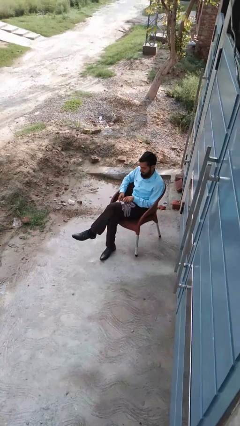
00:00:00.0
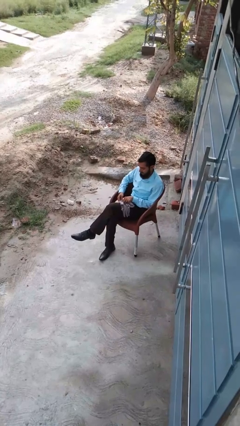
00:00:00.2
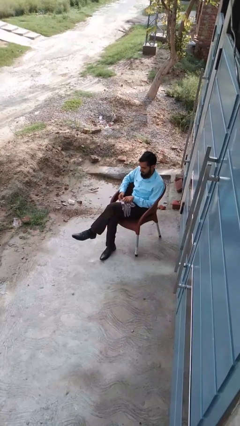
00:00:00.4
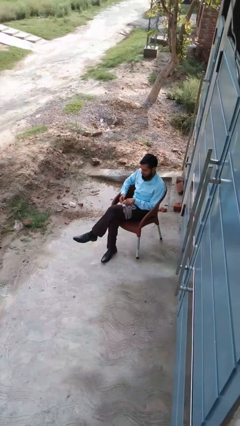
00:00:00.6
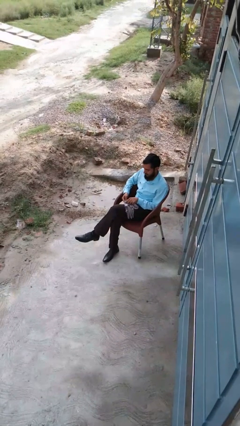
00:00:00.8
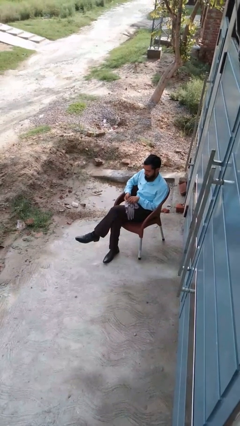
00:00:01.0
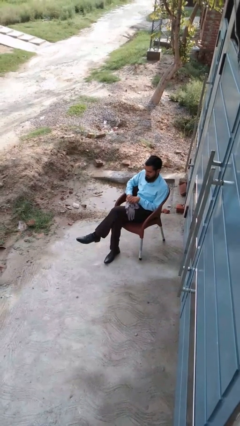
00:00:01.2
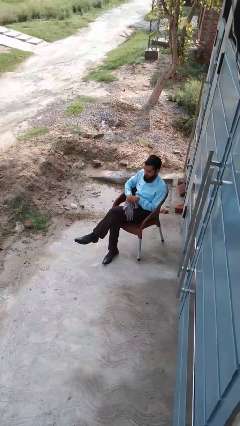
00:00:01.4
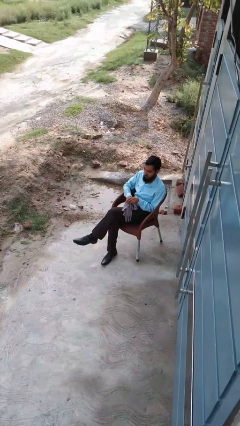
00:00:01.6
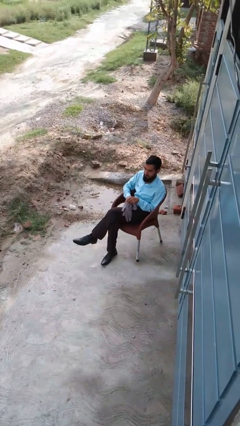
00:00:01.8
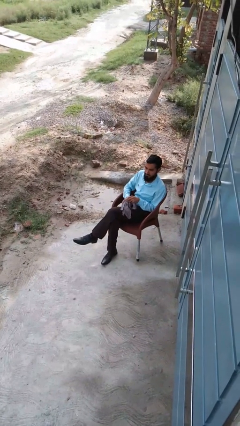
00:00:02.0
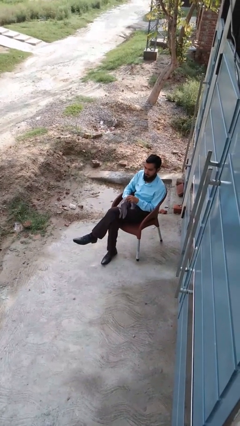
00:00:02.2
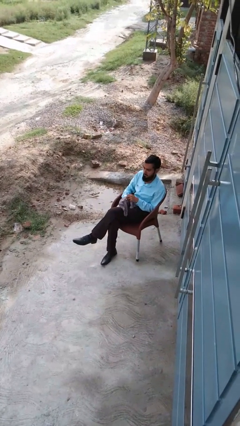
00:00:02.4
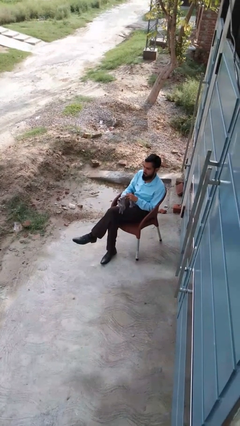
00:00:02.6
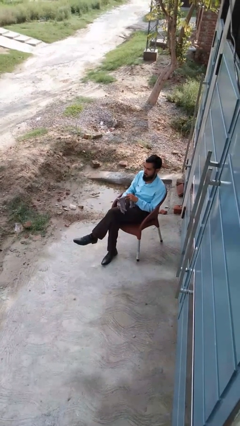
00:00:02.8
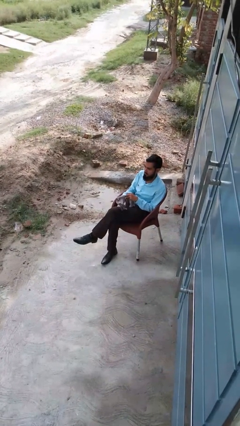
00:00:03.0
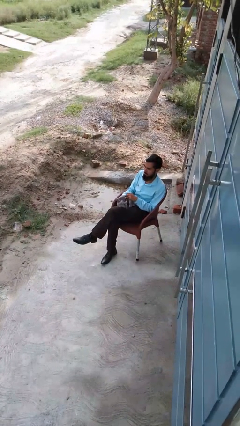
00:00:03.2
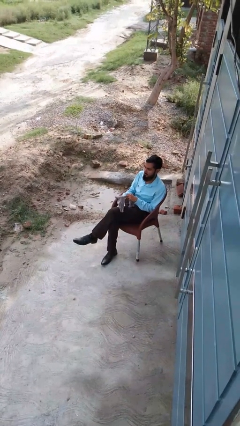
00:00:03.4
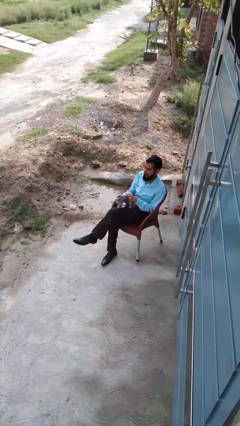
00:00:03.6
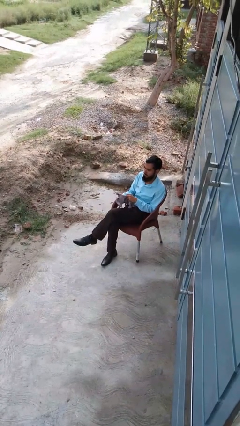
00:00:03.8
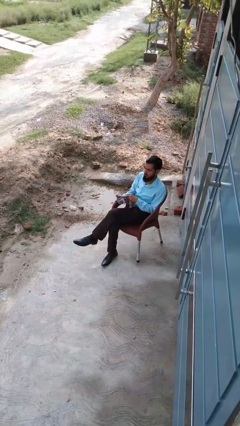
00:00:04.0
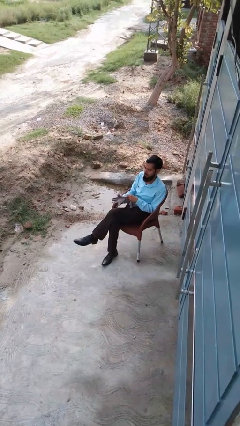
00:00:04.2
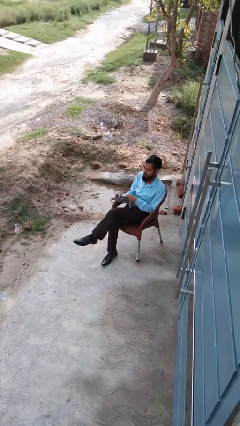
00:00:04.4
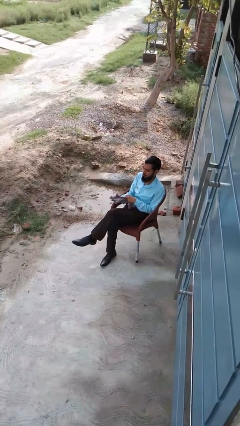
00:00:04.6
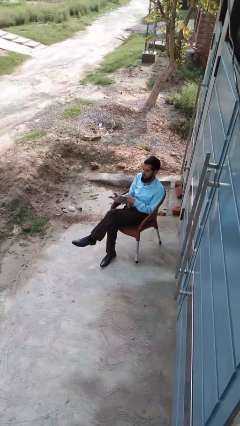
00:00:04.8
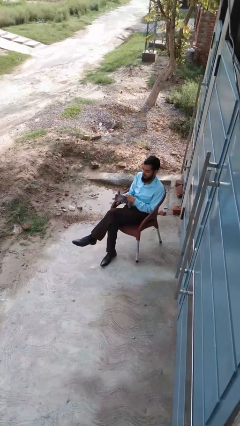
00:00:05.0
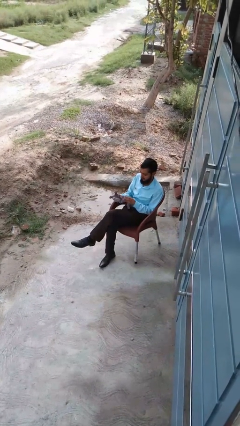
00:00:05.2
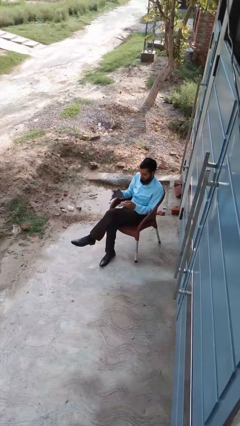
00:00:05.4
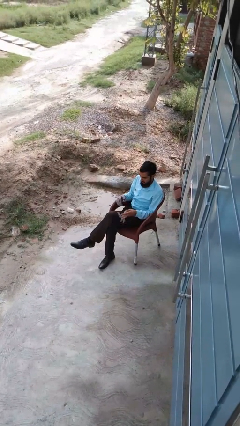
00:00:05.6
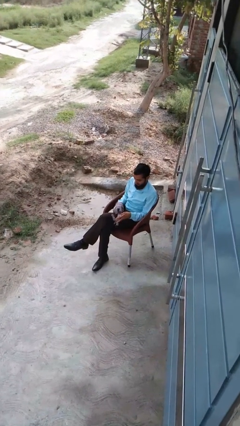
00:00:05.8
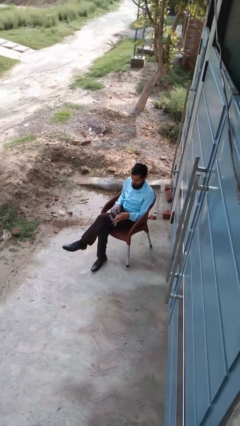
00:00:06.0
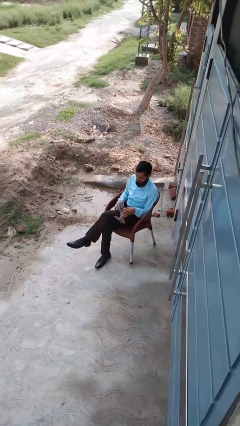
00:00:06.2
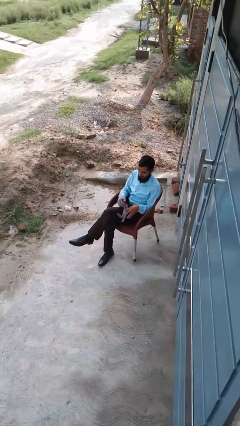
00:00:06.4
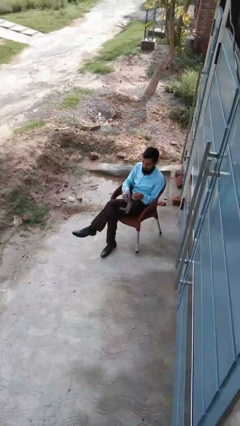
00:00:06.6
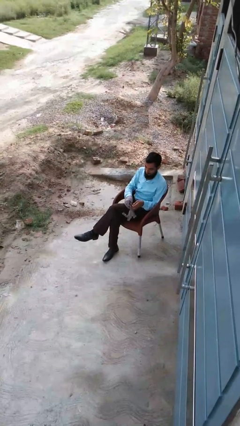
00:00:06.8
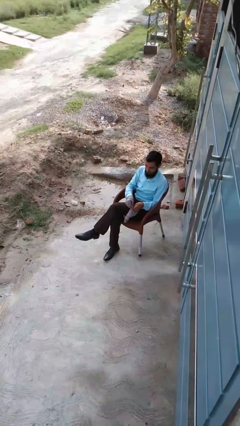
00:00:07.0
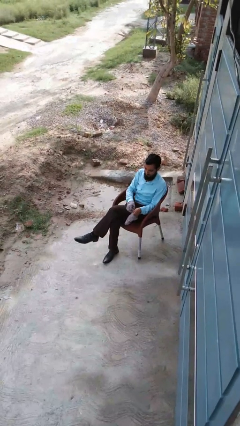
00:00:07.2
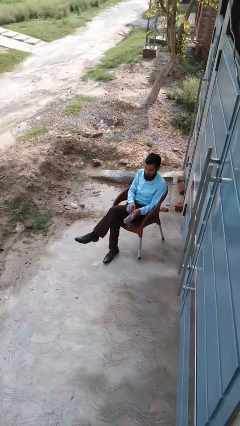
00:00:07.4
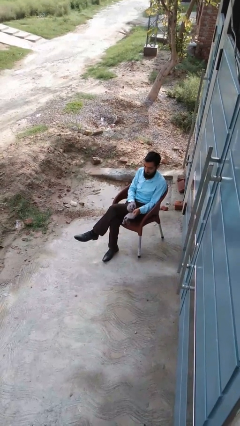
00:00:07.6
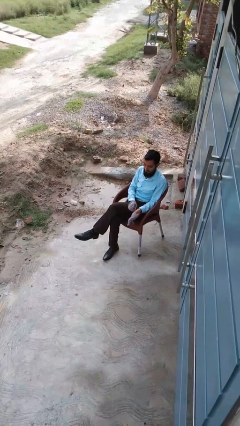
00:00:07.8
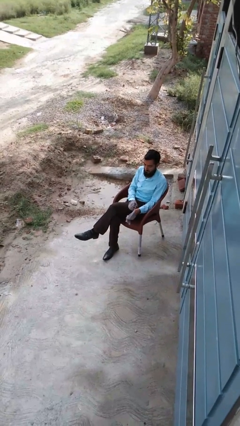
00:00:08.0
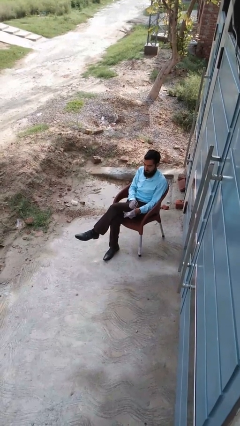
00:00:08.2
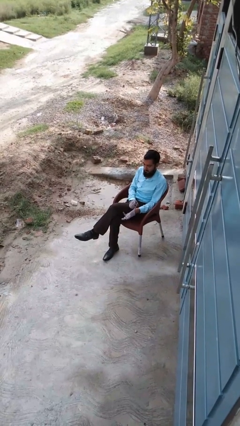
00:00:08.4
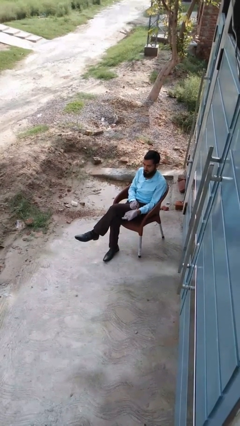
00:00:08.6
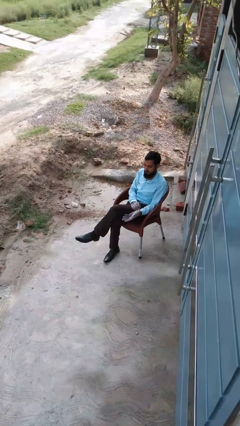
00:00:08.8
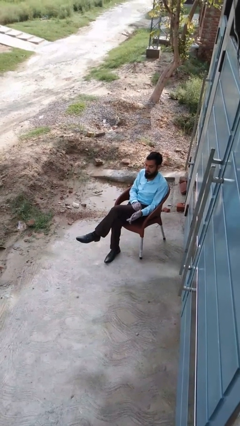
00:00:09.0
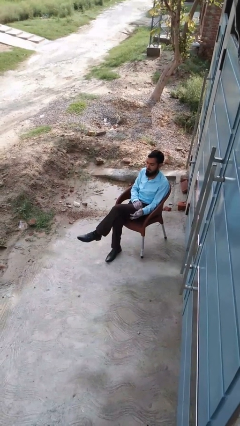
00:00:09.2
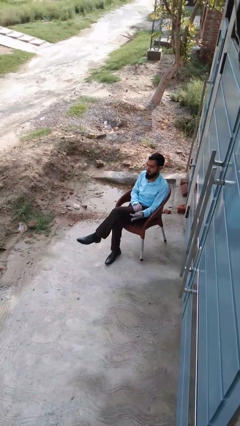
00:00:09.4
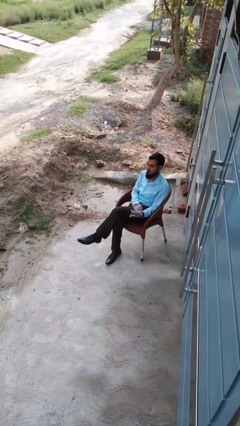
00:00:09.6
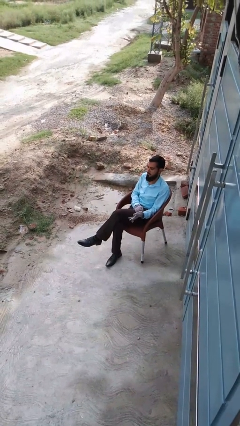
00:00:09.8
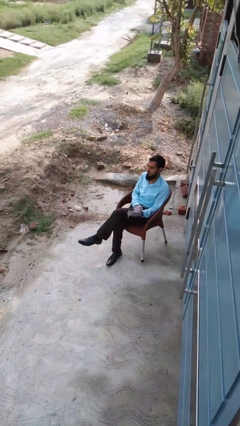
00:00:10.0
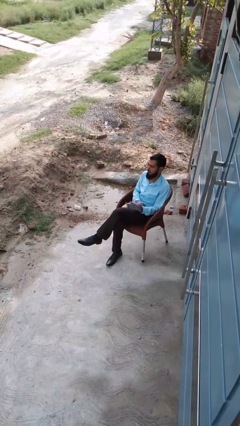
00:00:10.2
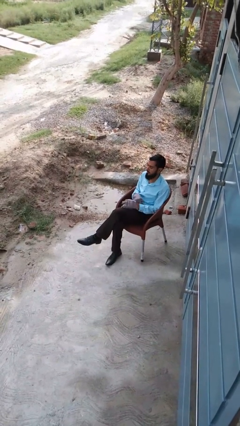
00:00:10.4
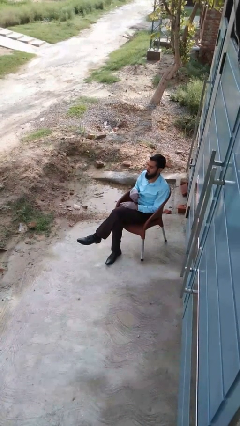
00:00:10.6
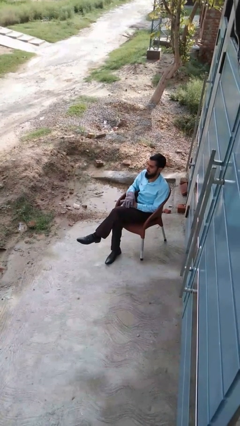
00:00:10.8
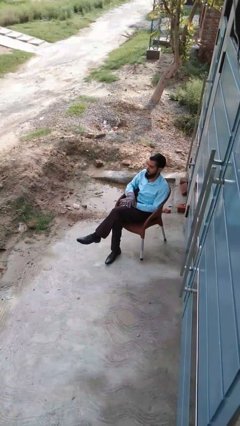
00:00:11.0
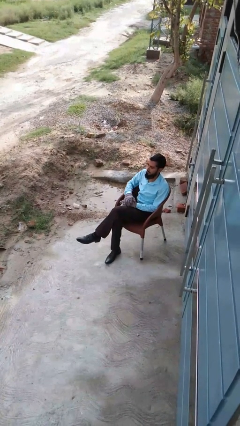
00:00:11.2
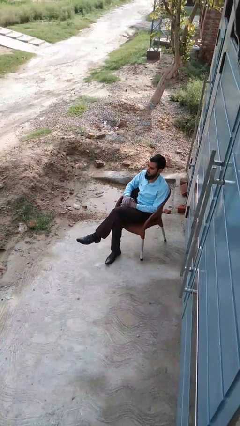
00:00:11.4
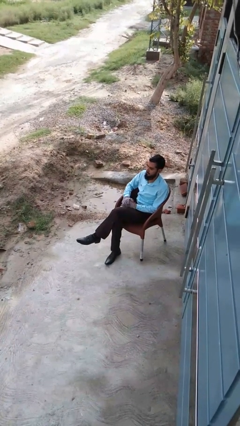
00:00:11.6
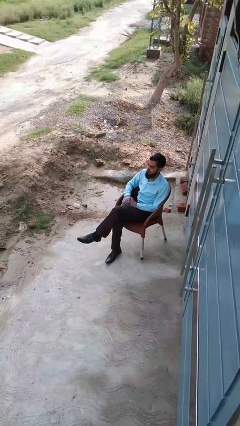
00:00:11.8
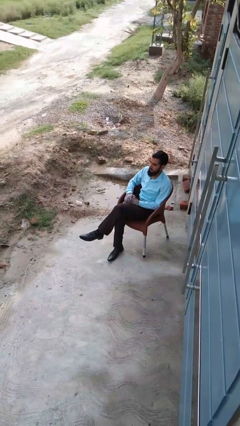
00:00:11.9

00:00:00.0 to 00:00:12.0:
person puts on gloves

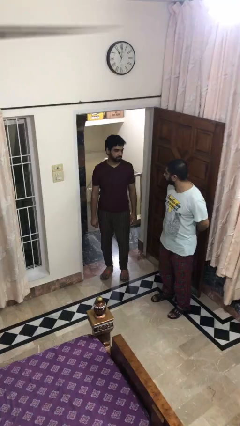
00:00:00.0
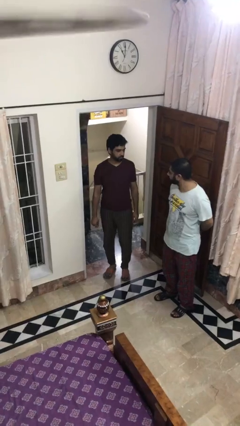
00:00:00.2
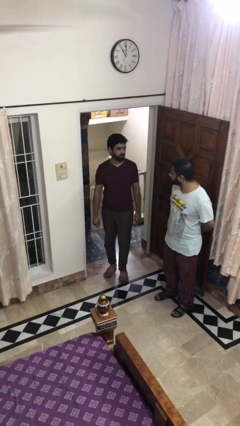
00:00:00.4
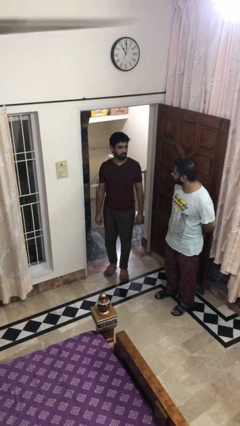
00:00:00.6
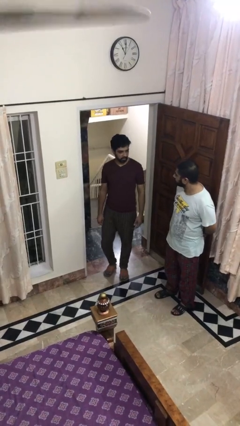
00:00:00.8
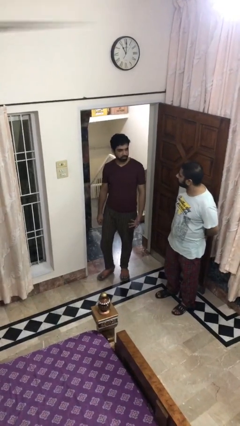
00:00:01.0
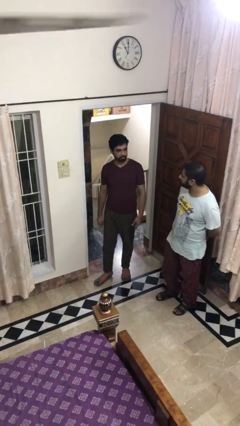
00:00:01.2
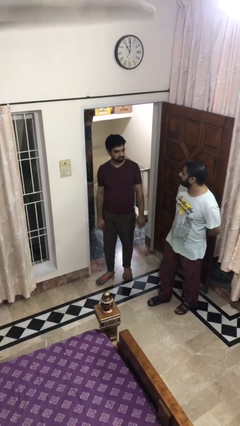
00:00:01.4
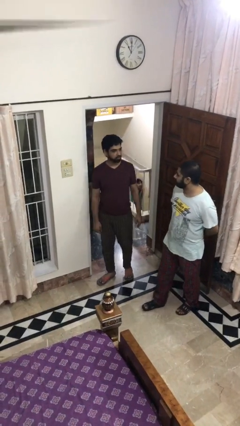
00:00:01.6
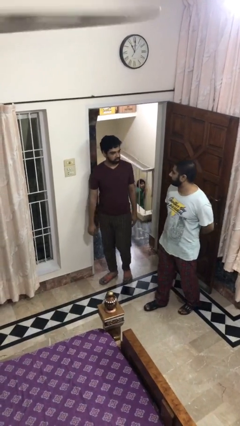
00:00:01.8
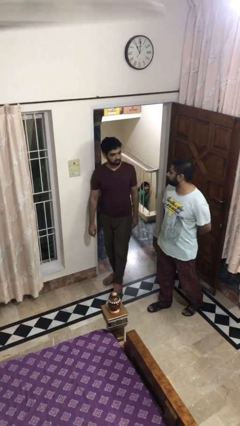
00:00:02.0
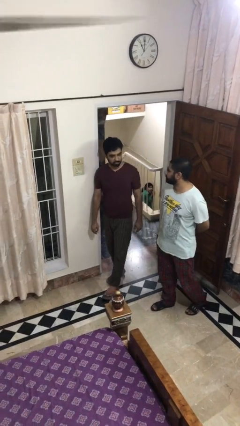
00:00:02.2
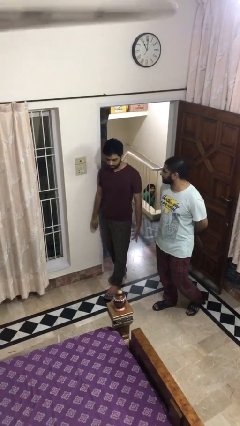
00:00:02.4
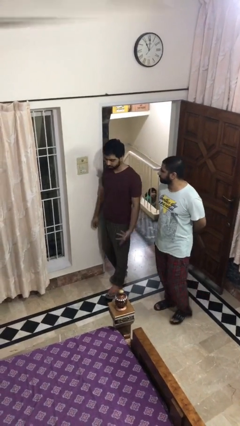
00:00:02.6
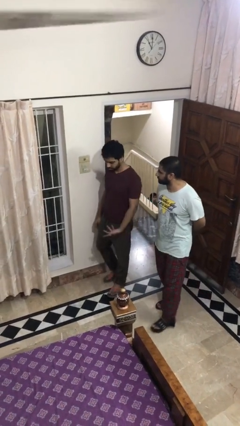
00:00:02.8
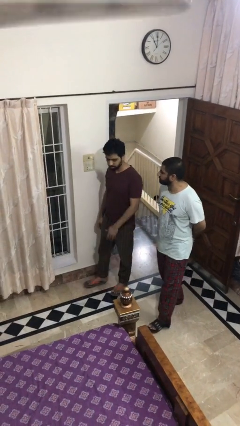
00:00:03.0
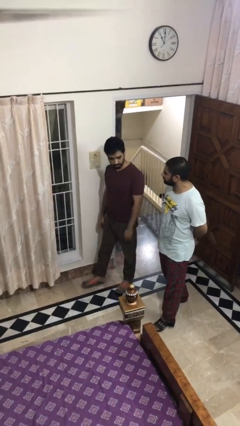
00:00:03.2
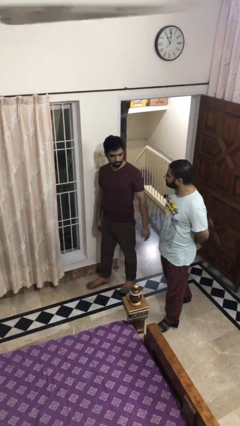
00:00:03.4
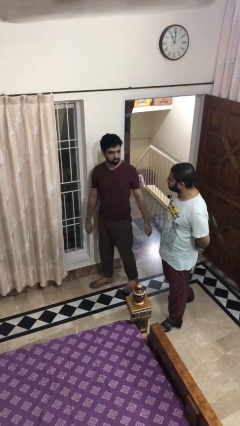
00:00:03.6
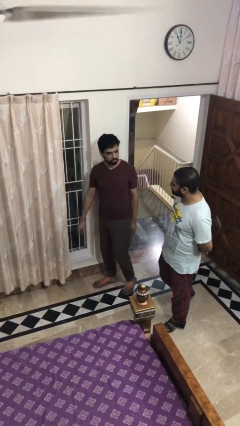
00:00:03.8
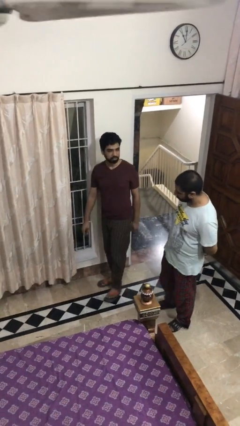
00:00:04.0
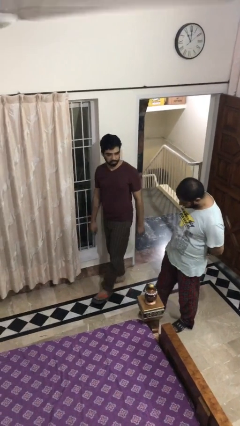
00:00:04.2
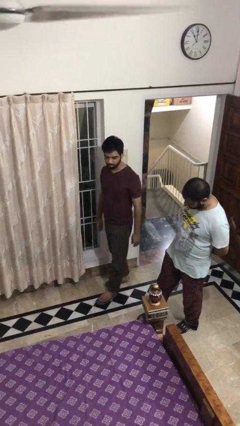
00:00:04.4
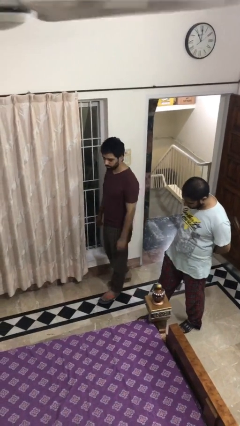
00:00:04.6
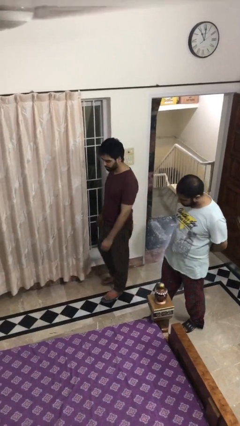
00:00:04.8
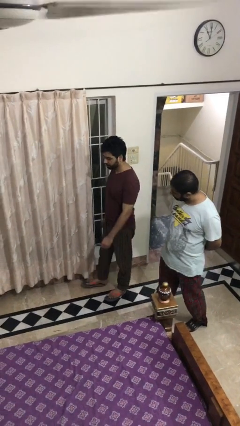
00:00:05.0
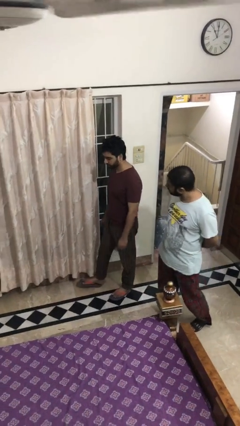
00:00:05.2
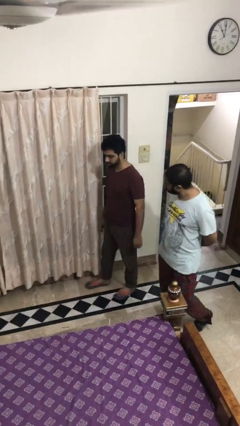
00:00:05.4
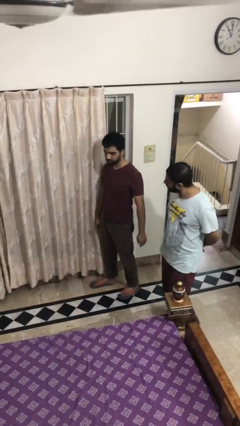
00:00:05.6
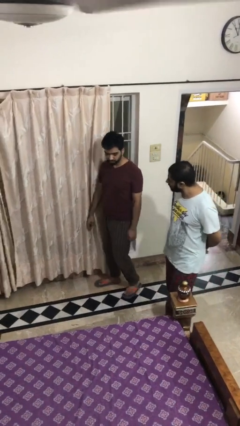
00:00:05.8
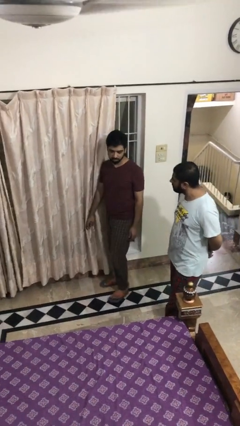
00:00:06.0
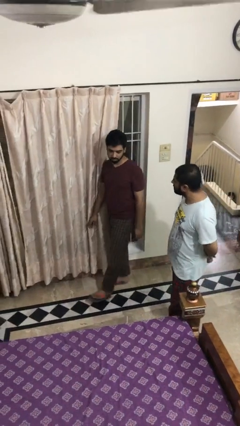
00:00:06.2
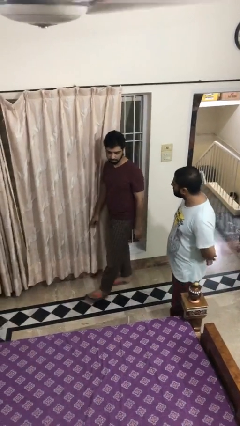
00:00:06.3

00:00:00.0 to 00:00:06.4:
person talks to person
